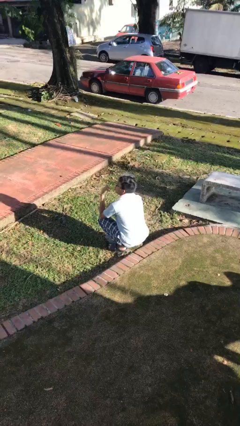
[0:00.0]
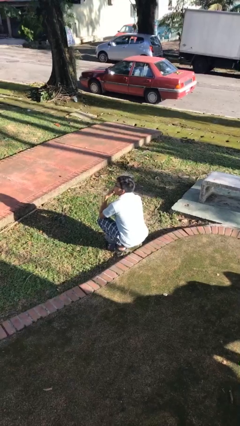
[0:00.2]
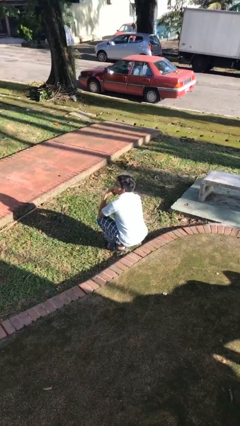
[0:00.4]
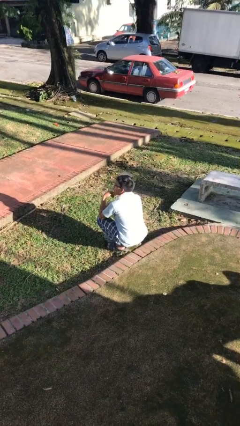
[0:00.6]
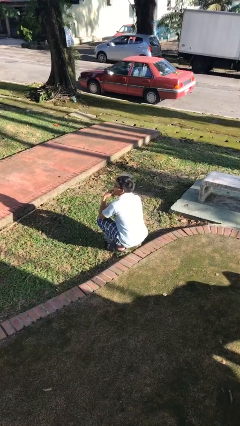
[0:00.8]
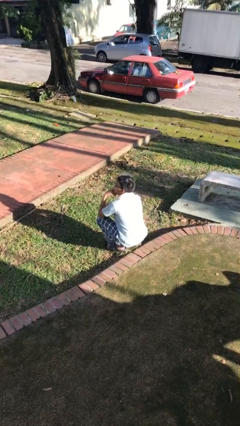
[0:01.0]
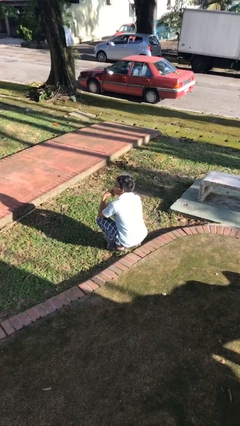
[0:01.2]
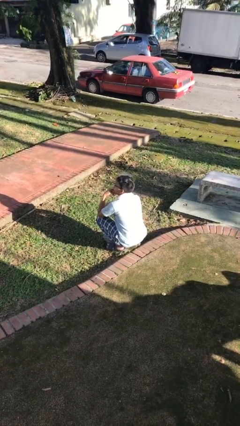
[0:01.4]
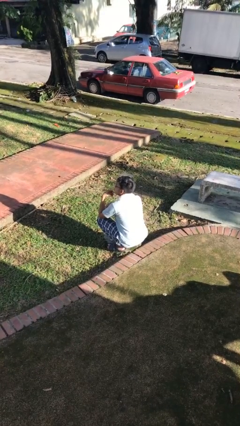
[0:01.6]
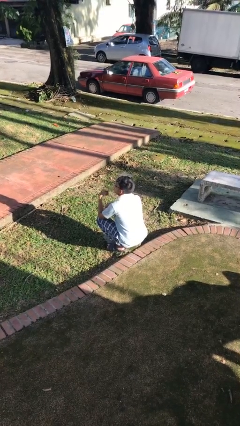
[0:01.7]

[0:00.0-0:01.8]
person strokes chin

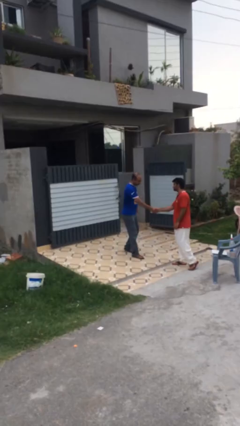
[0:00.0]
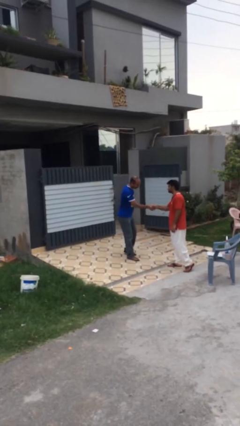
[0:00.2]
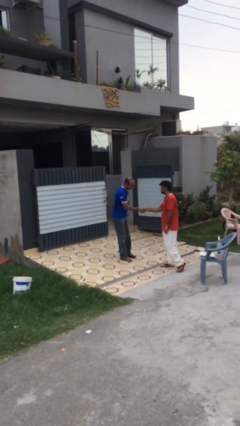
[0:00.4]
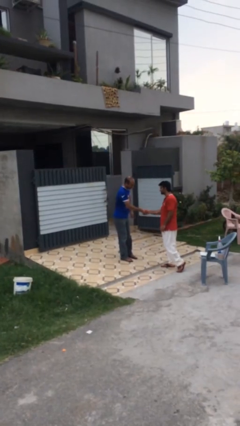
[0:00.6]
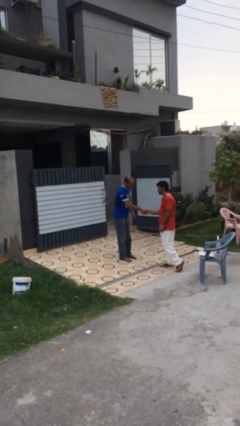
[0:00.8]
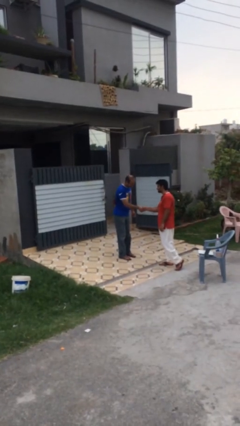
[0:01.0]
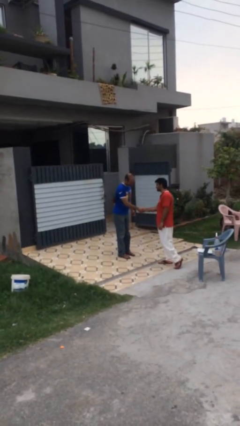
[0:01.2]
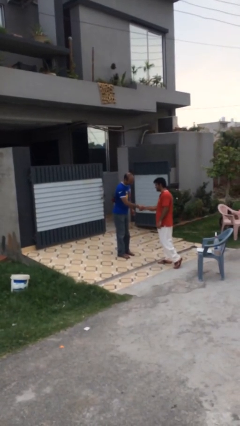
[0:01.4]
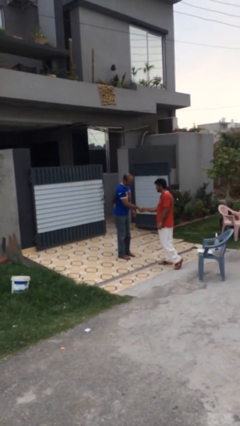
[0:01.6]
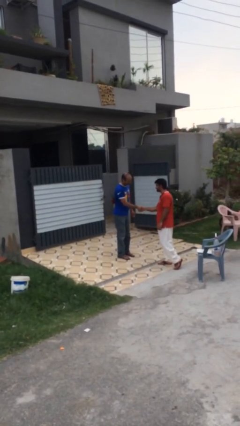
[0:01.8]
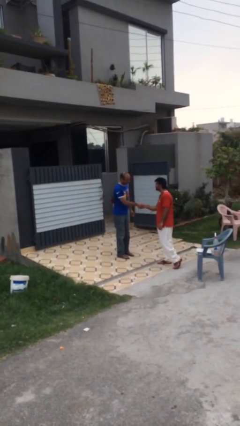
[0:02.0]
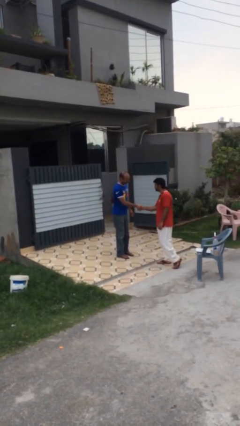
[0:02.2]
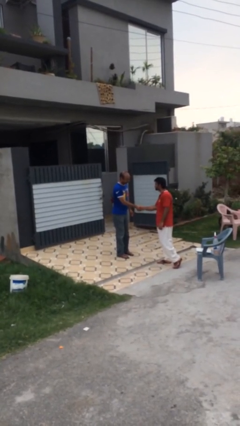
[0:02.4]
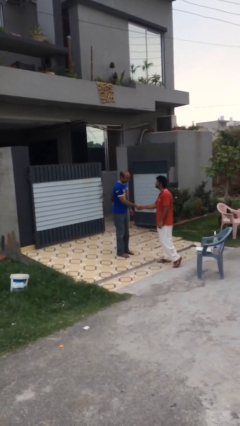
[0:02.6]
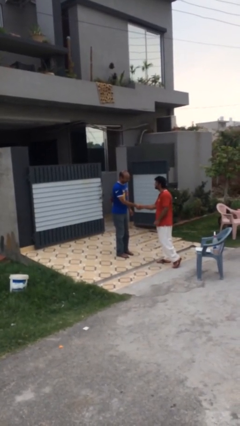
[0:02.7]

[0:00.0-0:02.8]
person shakes hand

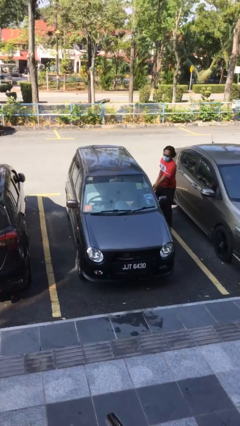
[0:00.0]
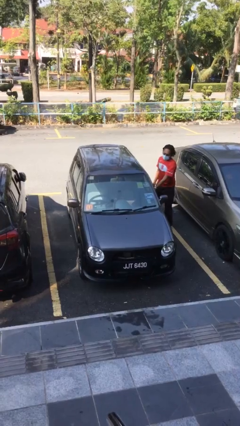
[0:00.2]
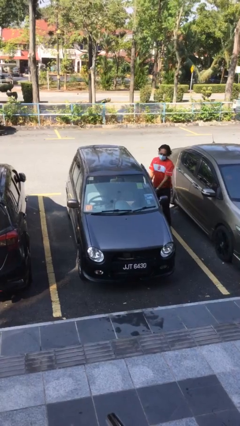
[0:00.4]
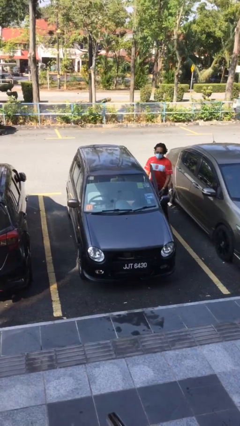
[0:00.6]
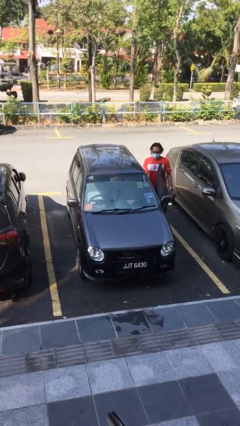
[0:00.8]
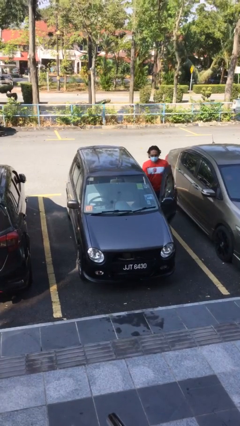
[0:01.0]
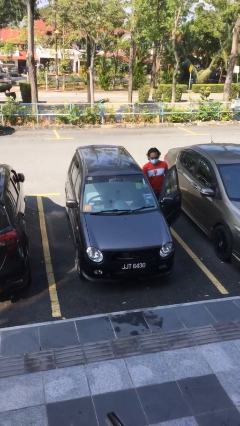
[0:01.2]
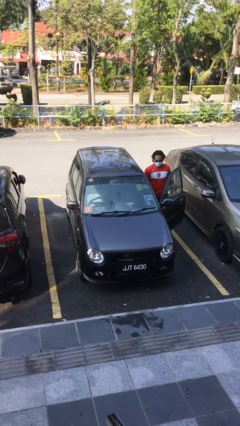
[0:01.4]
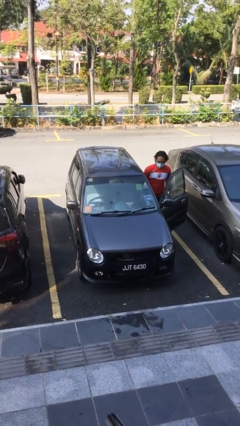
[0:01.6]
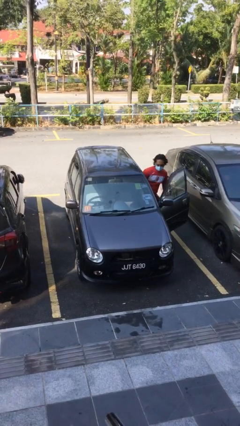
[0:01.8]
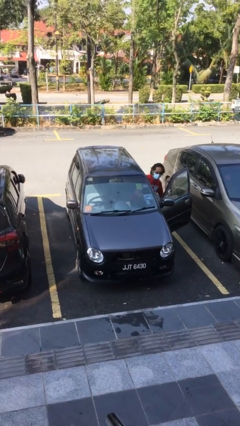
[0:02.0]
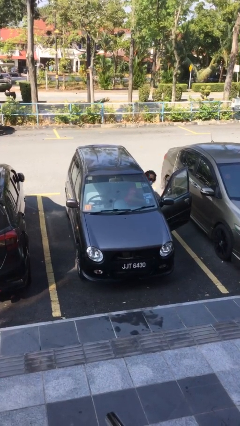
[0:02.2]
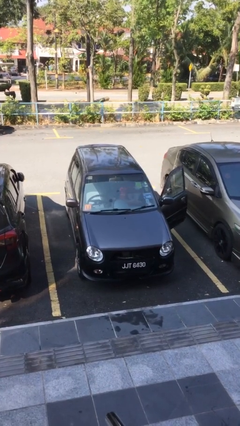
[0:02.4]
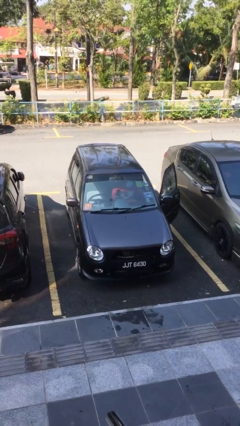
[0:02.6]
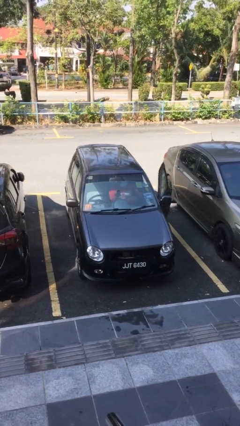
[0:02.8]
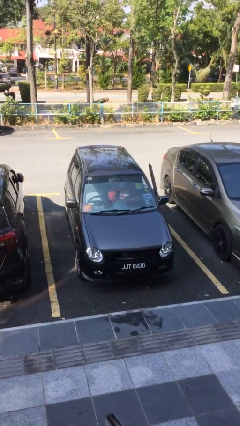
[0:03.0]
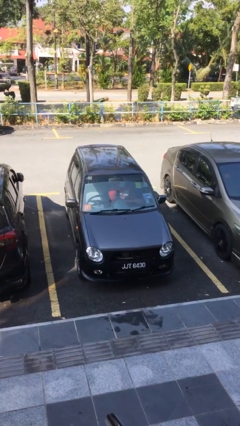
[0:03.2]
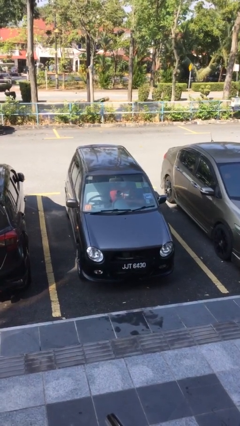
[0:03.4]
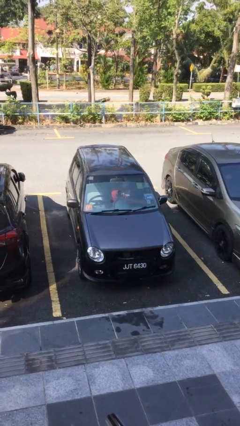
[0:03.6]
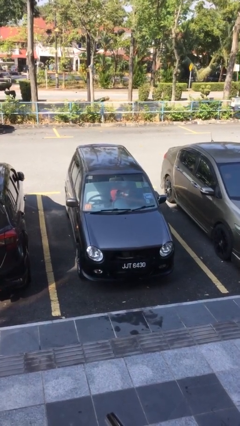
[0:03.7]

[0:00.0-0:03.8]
car picks up person

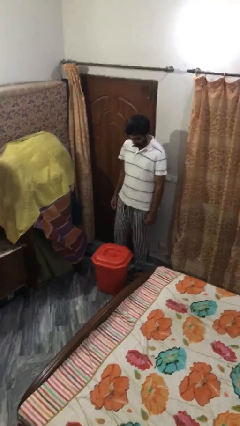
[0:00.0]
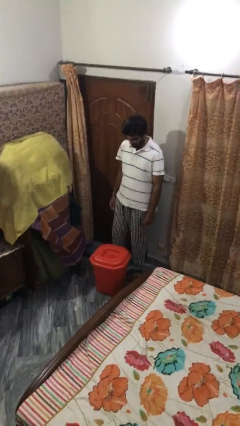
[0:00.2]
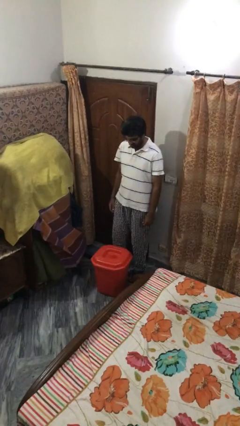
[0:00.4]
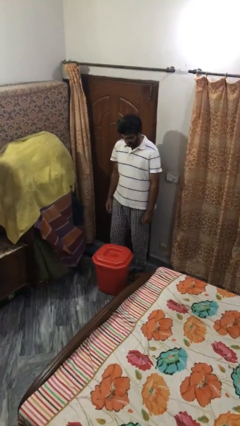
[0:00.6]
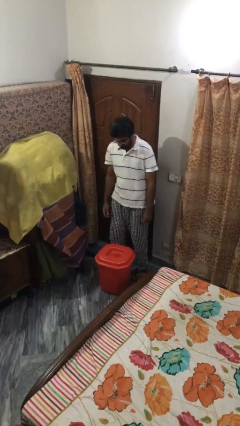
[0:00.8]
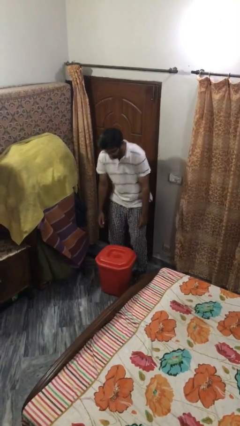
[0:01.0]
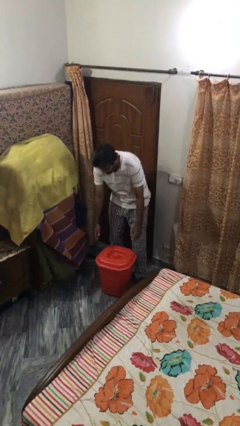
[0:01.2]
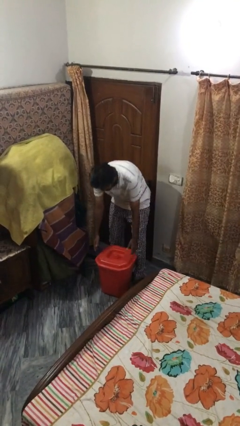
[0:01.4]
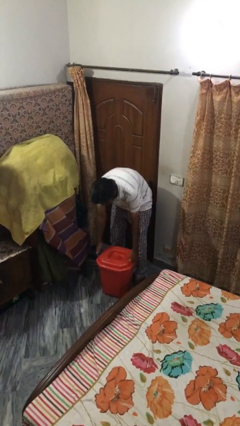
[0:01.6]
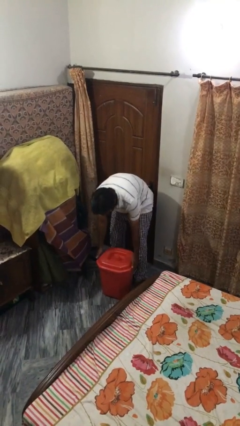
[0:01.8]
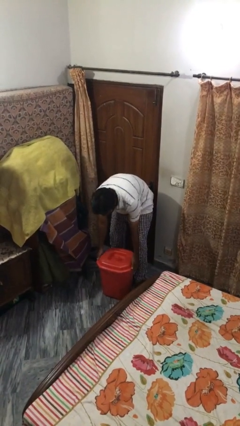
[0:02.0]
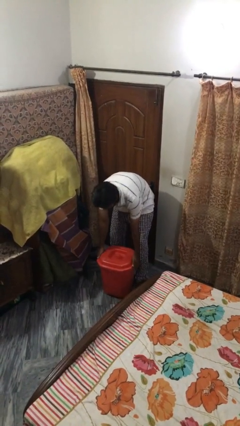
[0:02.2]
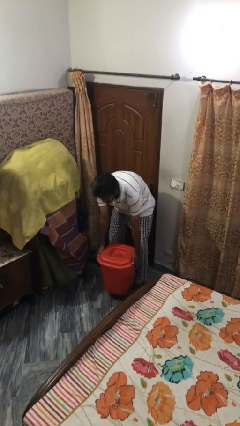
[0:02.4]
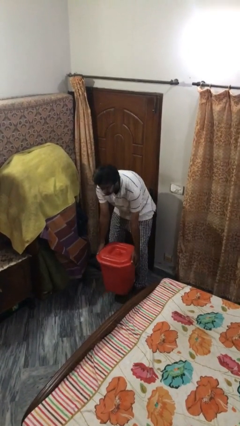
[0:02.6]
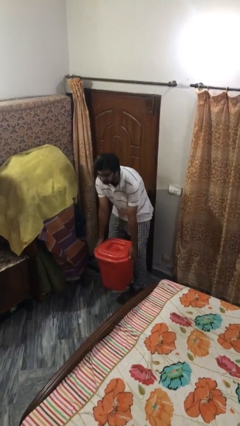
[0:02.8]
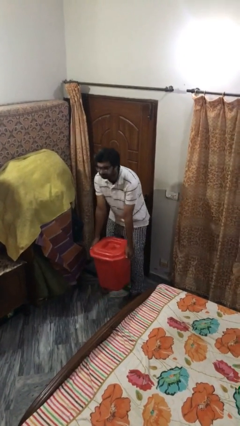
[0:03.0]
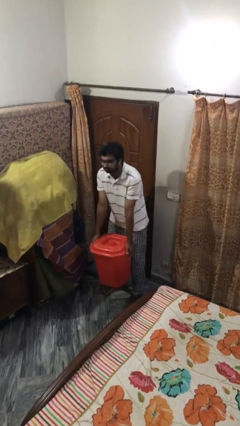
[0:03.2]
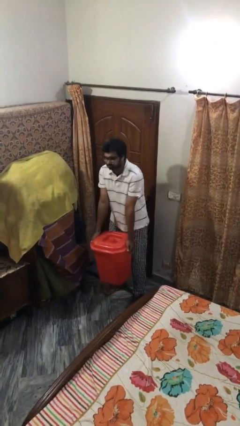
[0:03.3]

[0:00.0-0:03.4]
person picks up object from floor

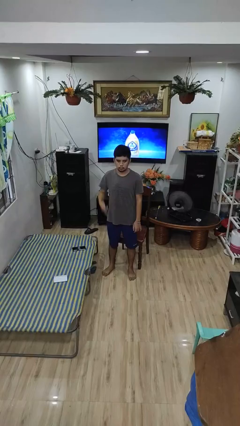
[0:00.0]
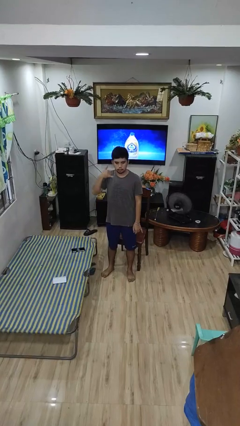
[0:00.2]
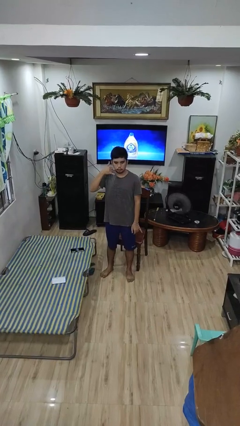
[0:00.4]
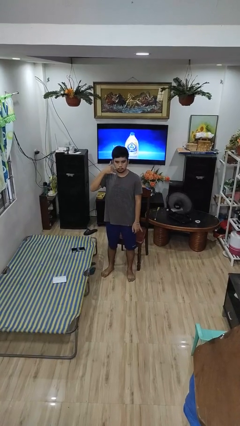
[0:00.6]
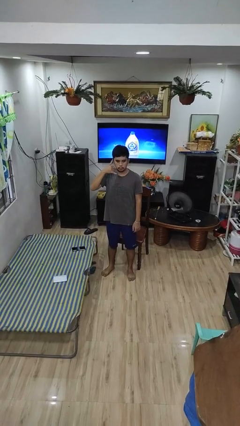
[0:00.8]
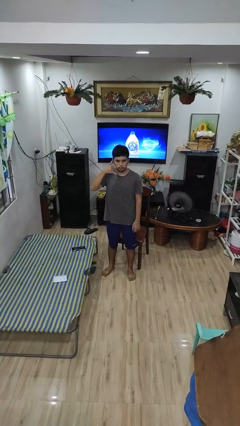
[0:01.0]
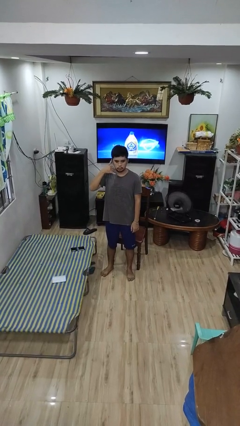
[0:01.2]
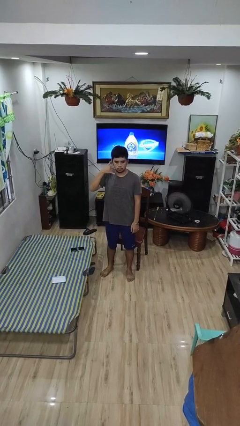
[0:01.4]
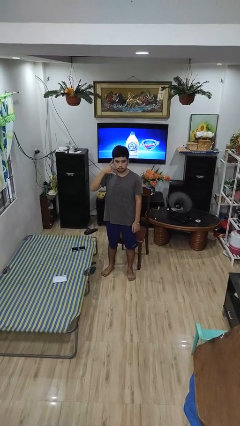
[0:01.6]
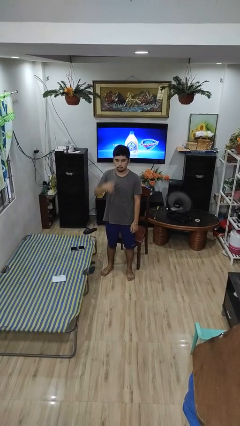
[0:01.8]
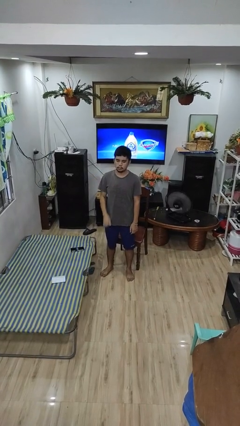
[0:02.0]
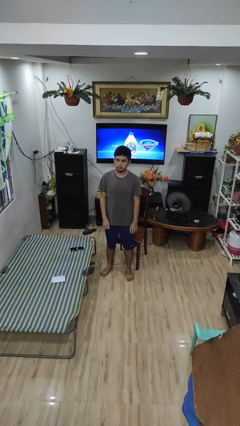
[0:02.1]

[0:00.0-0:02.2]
person gestures call me

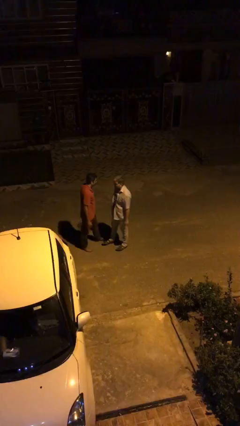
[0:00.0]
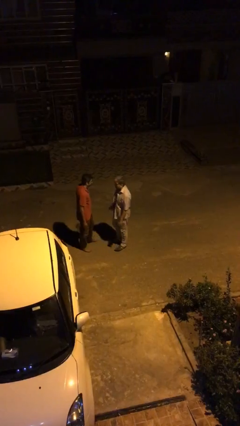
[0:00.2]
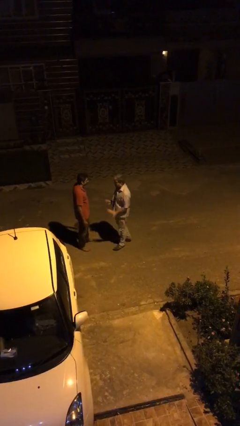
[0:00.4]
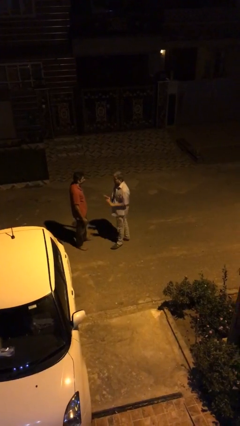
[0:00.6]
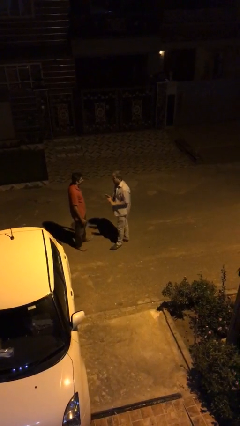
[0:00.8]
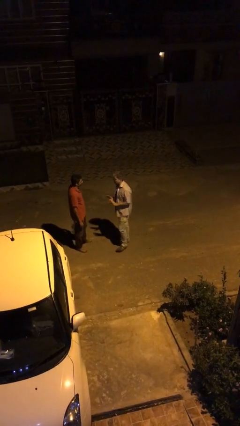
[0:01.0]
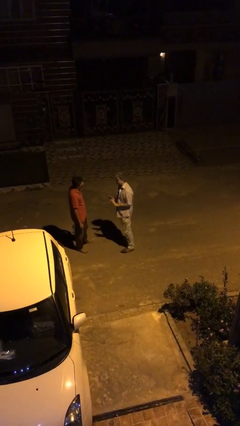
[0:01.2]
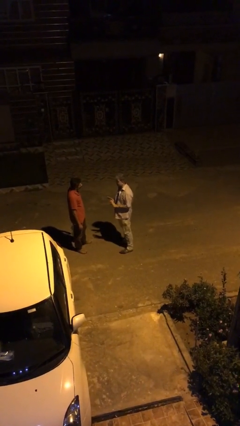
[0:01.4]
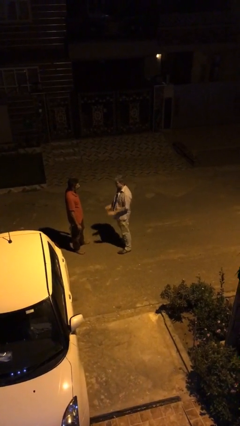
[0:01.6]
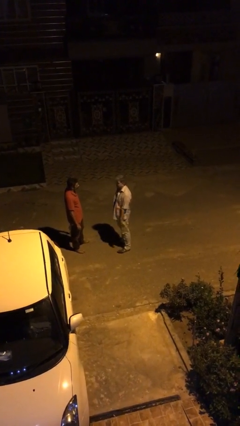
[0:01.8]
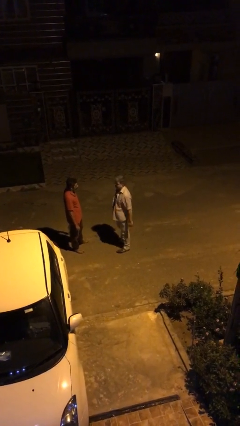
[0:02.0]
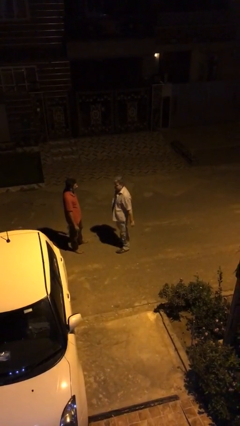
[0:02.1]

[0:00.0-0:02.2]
person talks to person

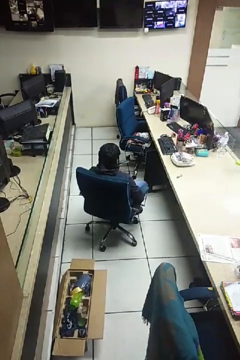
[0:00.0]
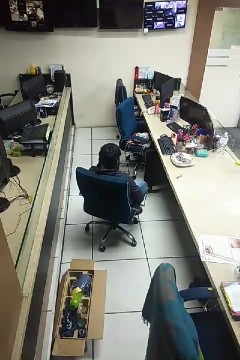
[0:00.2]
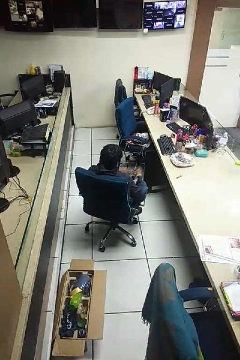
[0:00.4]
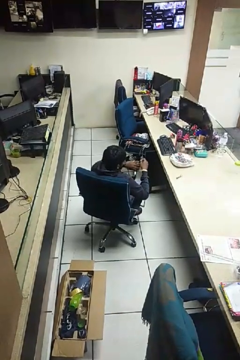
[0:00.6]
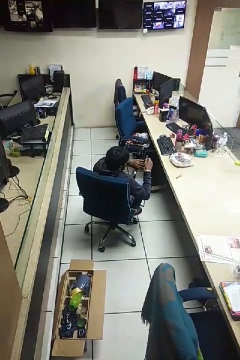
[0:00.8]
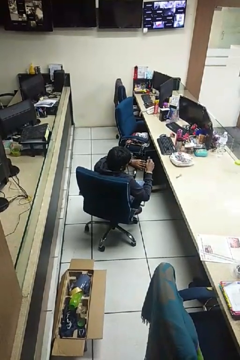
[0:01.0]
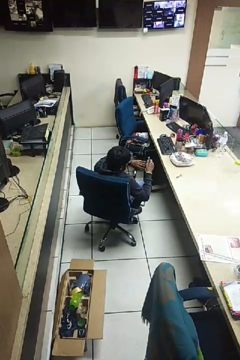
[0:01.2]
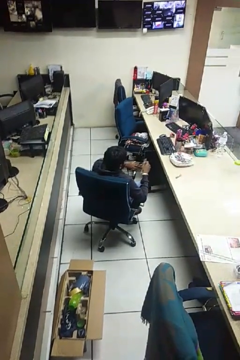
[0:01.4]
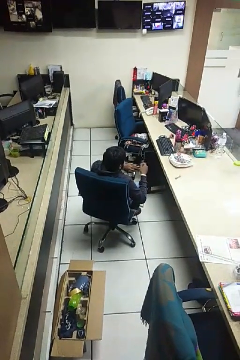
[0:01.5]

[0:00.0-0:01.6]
person files fingernails
